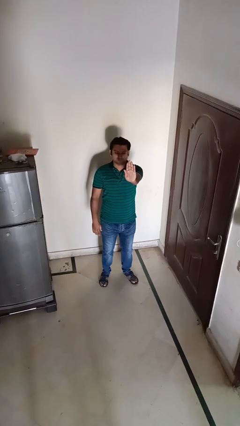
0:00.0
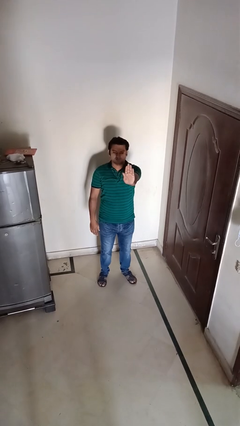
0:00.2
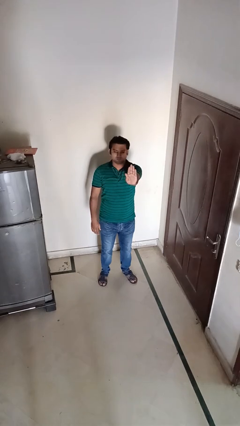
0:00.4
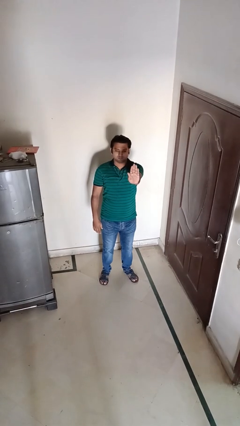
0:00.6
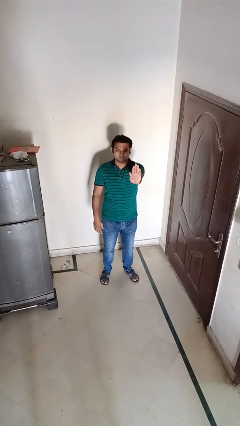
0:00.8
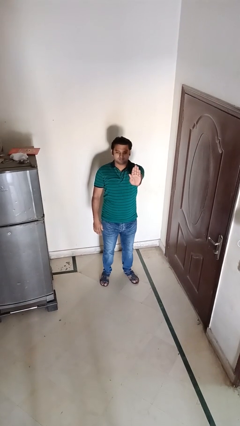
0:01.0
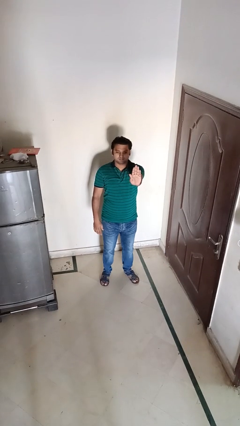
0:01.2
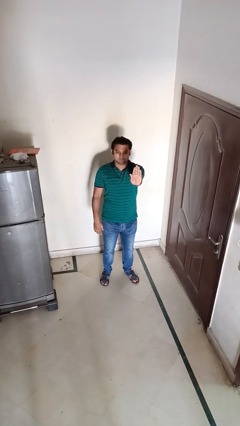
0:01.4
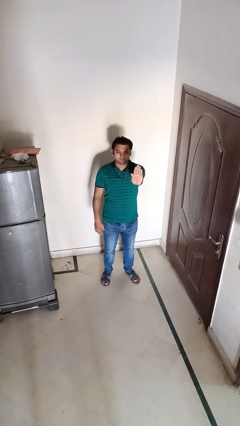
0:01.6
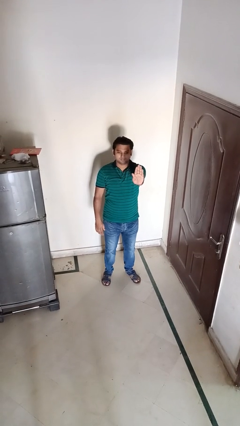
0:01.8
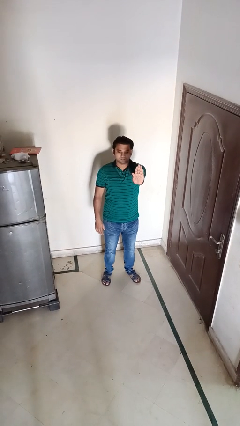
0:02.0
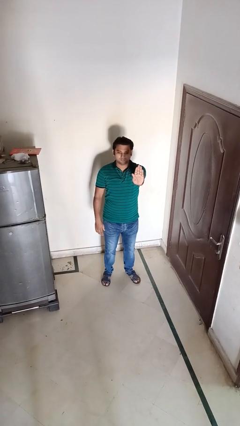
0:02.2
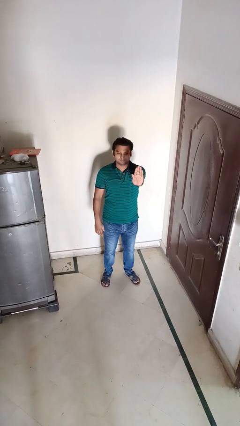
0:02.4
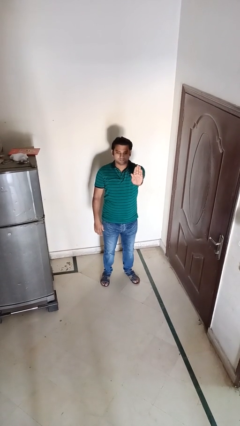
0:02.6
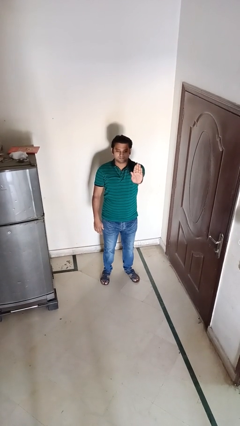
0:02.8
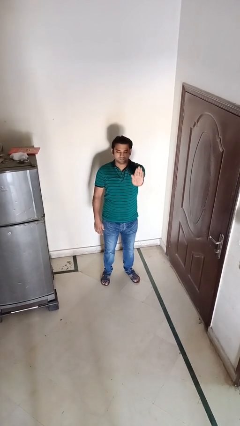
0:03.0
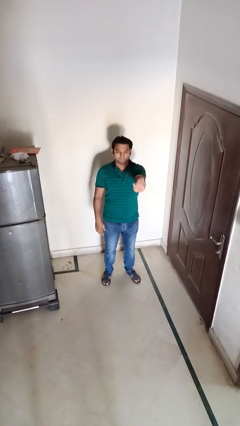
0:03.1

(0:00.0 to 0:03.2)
person gestures stop

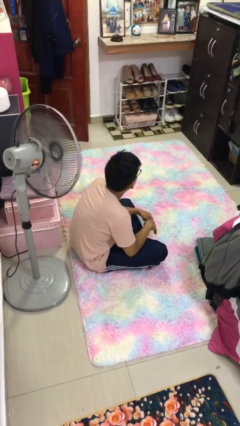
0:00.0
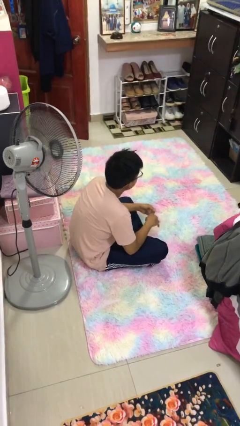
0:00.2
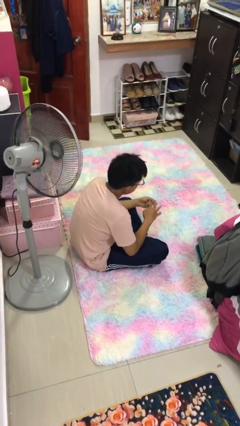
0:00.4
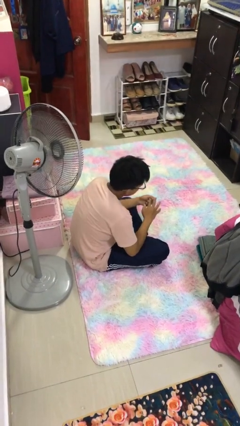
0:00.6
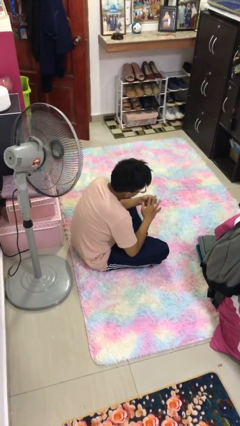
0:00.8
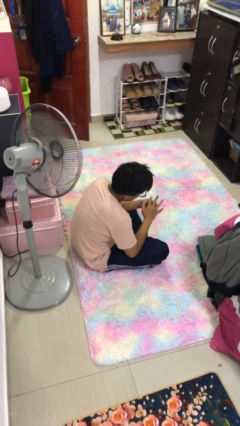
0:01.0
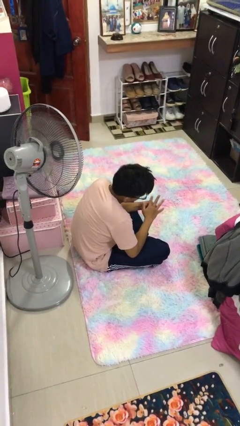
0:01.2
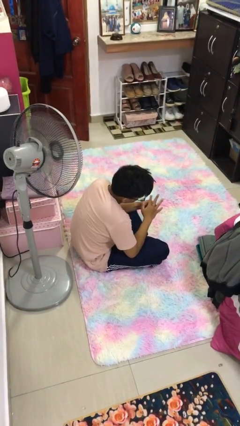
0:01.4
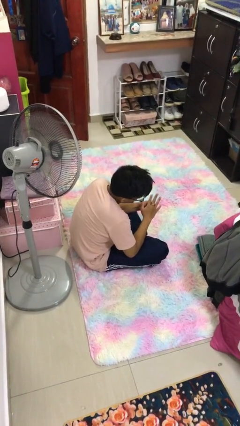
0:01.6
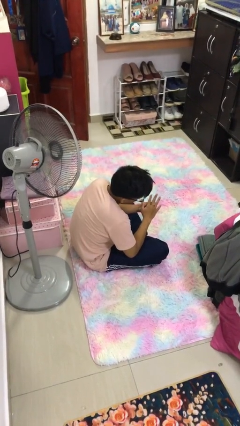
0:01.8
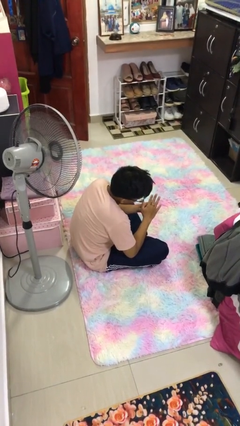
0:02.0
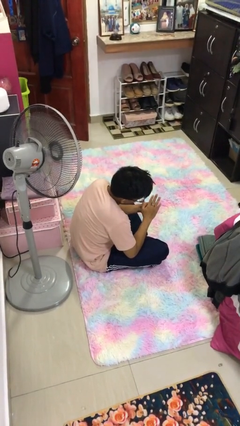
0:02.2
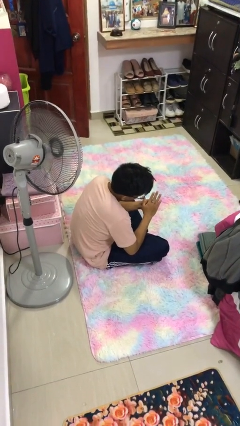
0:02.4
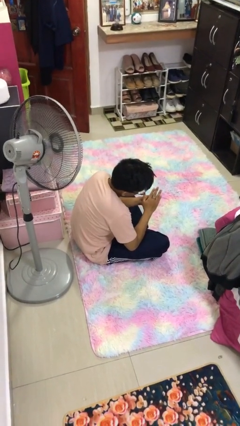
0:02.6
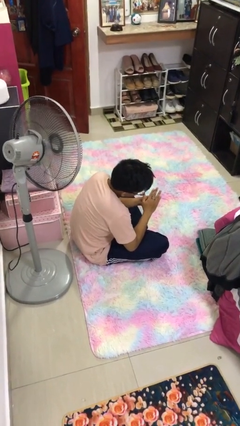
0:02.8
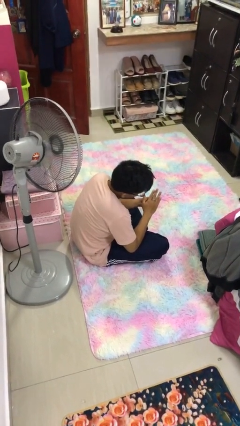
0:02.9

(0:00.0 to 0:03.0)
person puts on ring

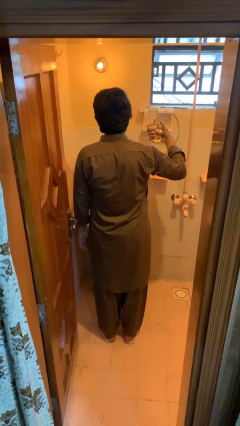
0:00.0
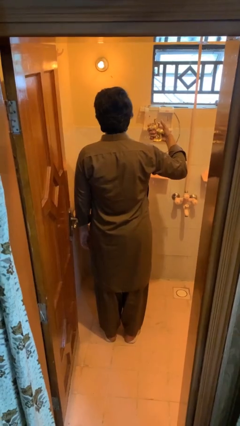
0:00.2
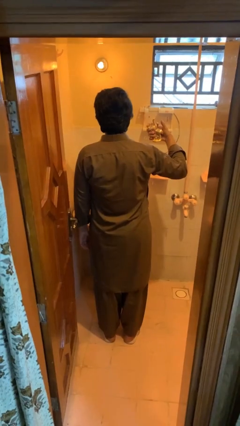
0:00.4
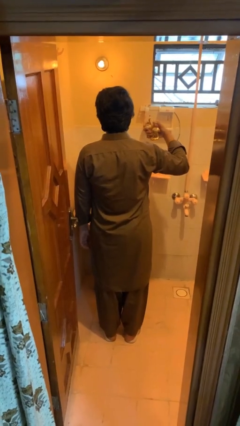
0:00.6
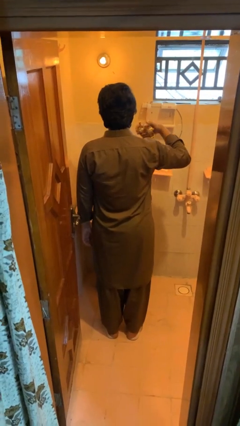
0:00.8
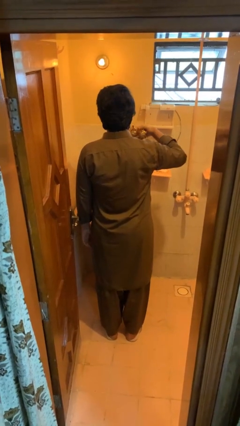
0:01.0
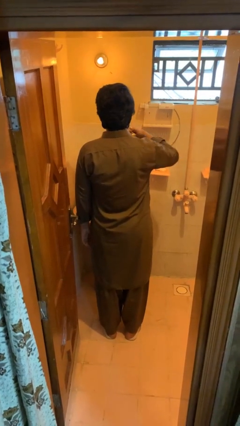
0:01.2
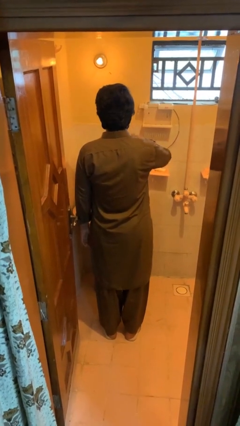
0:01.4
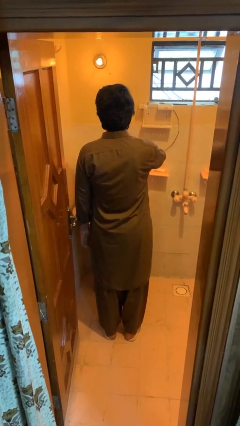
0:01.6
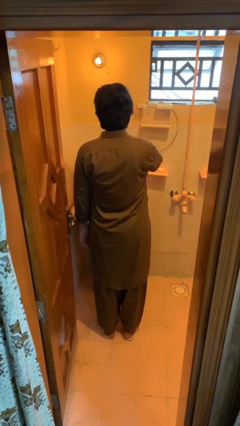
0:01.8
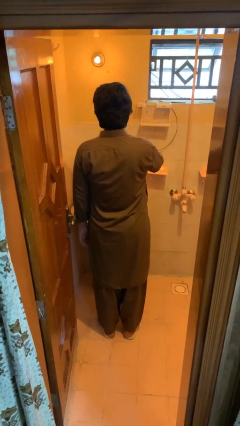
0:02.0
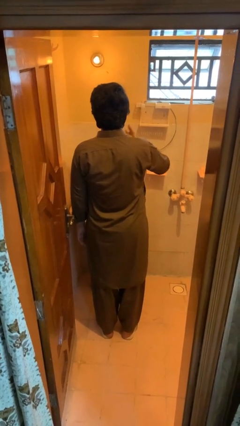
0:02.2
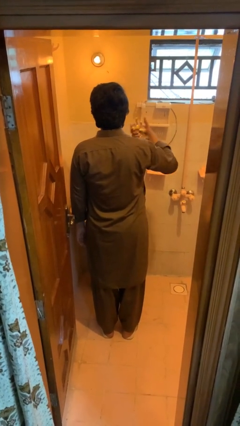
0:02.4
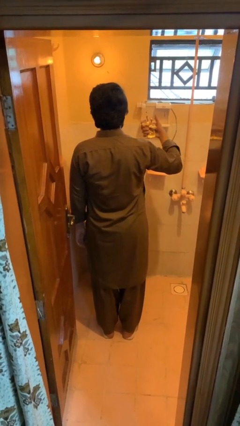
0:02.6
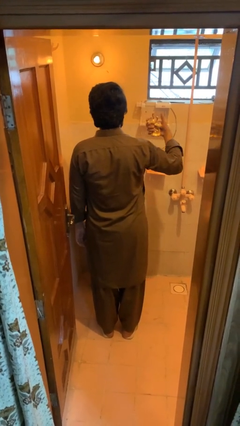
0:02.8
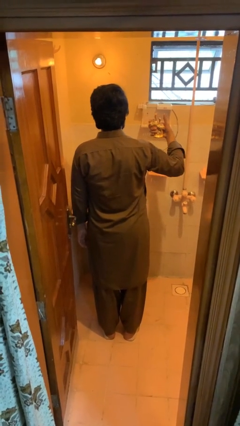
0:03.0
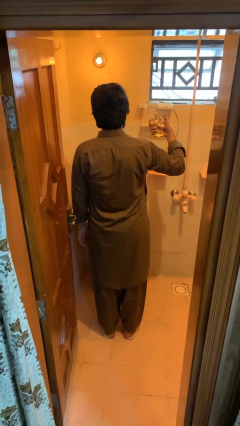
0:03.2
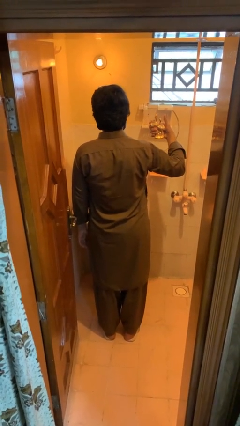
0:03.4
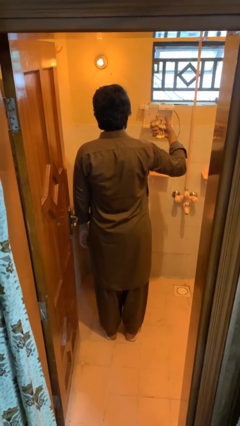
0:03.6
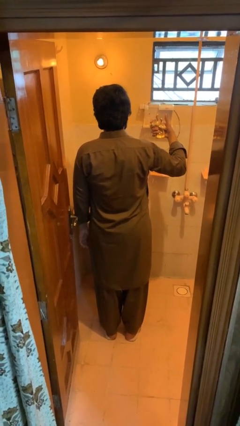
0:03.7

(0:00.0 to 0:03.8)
person applies deodorant

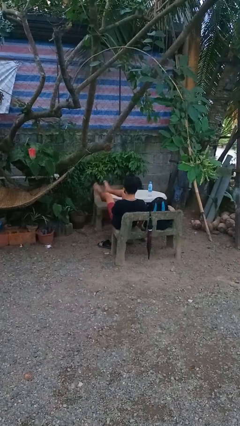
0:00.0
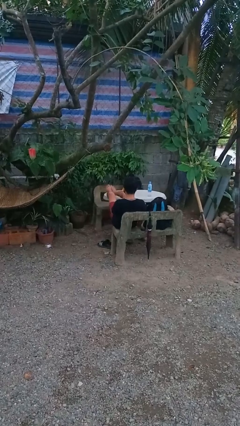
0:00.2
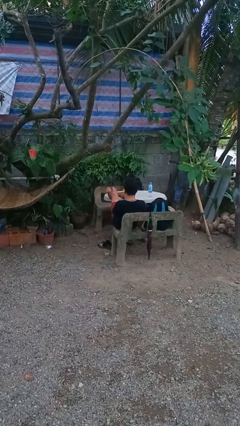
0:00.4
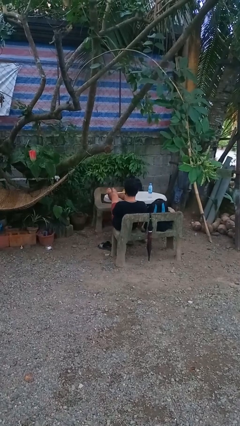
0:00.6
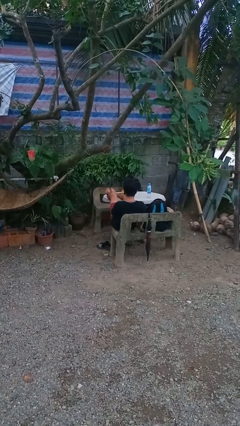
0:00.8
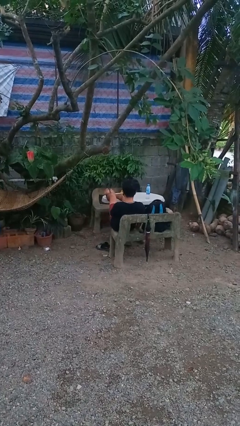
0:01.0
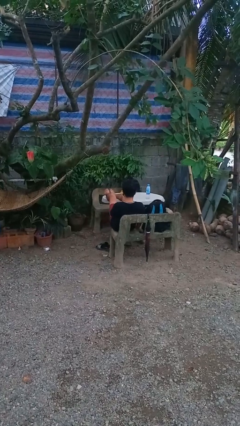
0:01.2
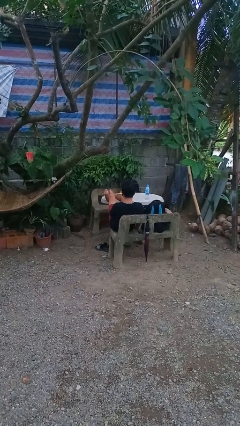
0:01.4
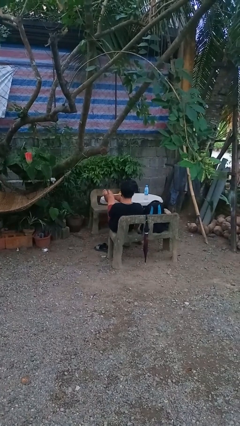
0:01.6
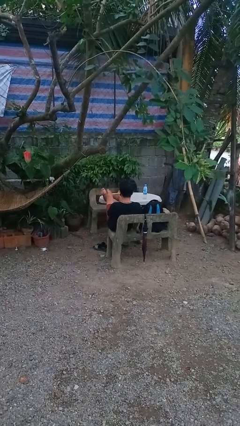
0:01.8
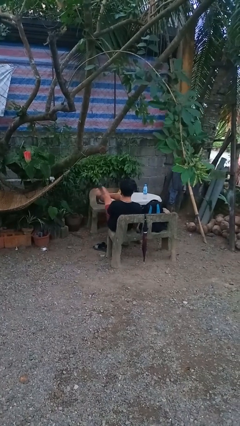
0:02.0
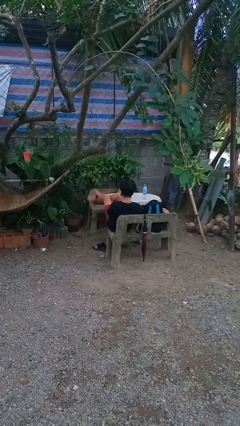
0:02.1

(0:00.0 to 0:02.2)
person puts feet up

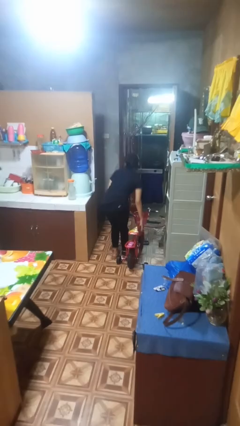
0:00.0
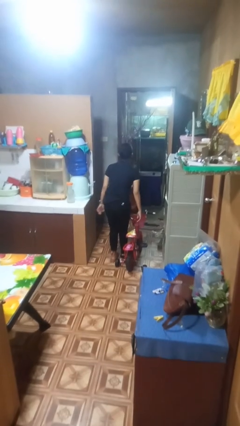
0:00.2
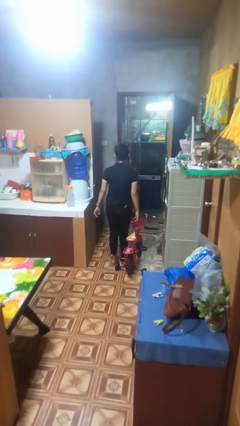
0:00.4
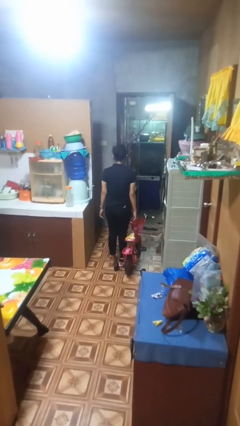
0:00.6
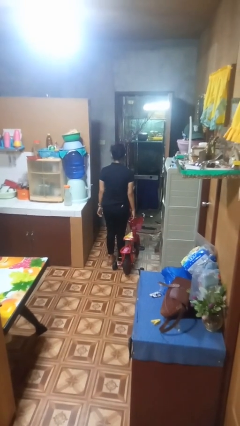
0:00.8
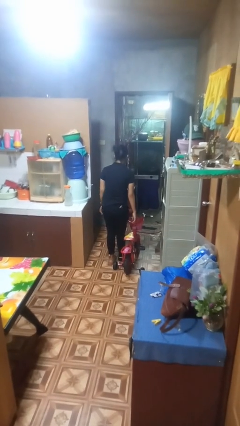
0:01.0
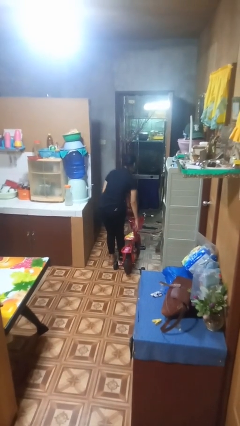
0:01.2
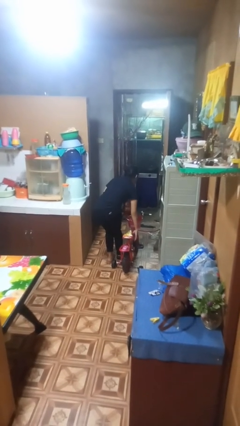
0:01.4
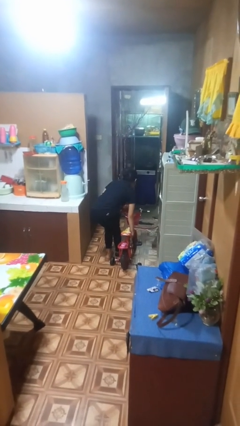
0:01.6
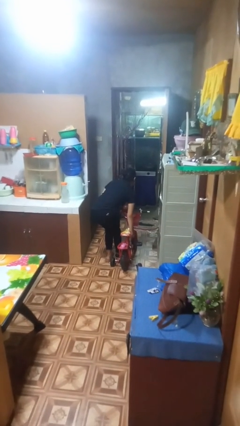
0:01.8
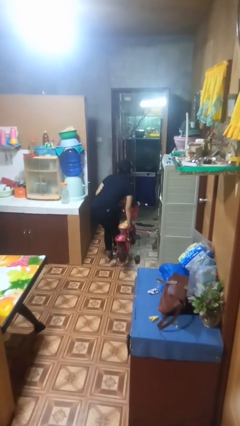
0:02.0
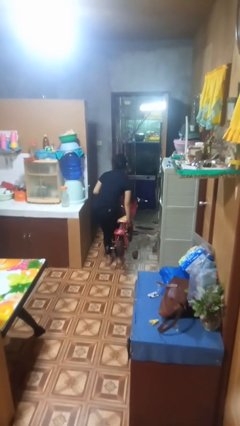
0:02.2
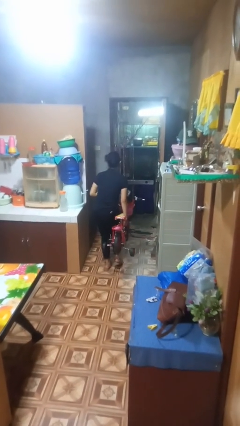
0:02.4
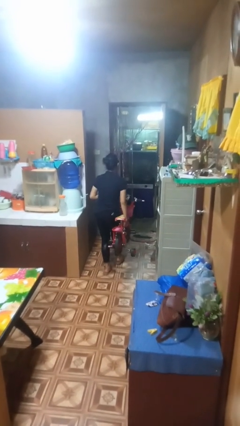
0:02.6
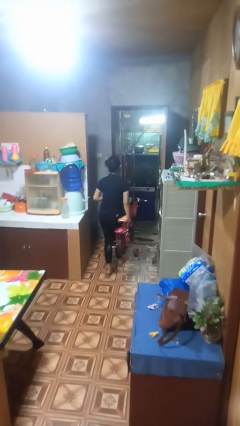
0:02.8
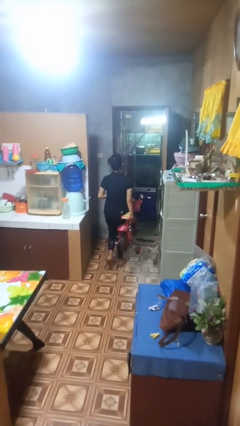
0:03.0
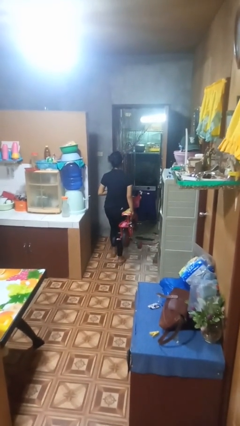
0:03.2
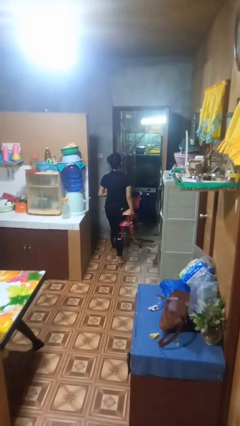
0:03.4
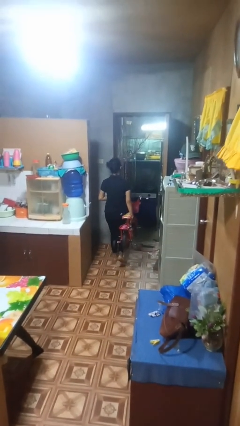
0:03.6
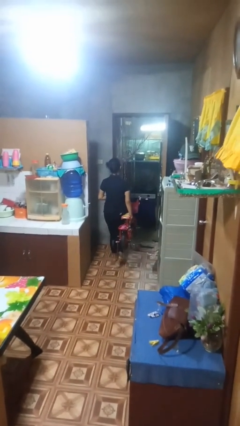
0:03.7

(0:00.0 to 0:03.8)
person carries bicycle

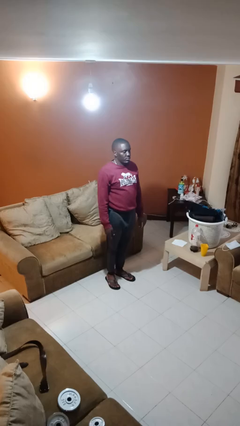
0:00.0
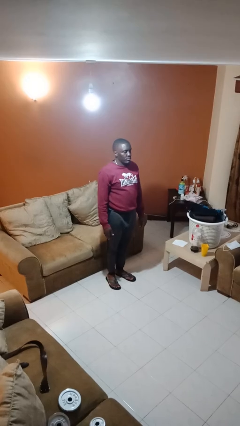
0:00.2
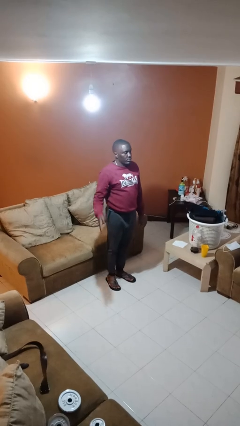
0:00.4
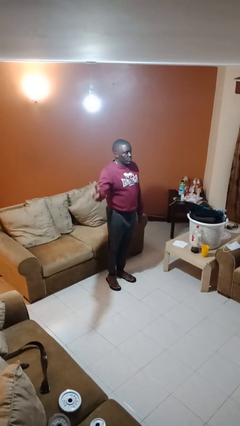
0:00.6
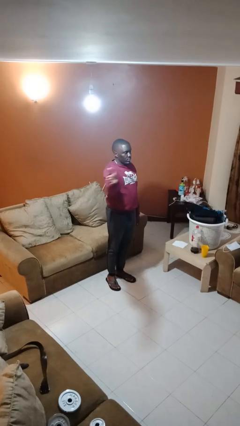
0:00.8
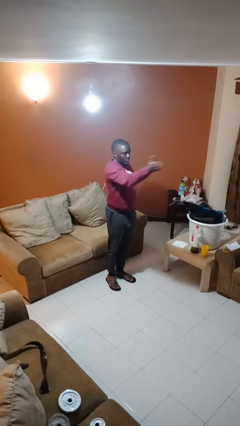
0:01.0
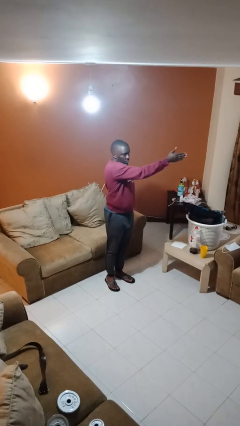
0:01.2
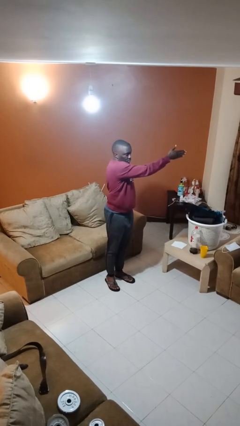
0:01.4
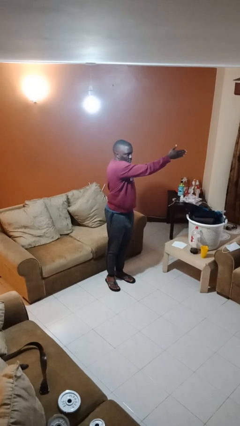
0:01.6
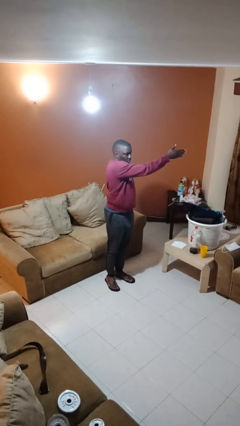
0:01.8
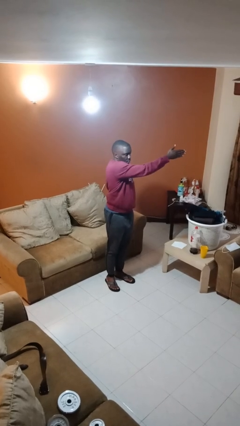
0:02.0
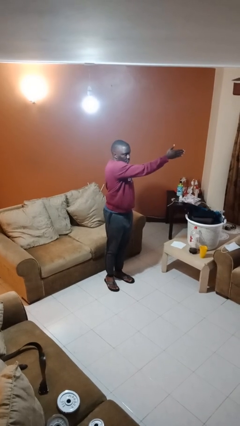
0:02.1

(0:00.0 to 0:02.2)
person gestures swipe left
